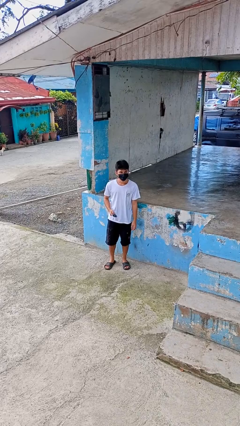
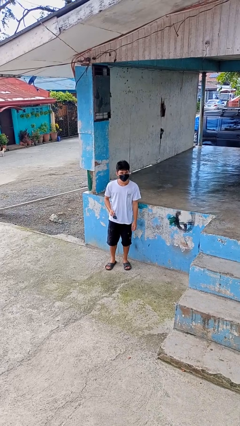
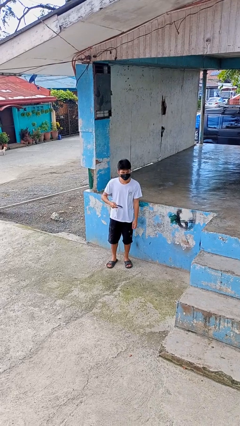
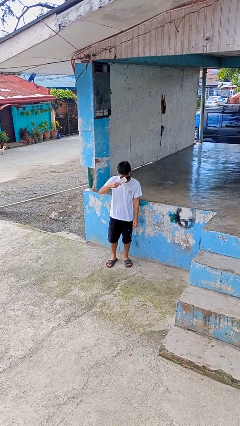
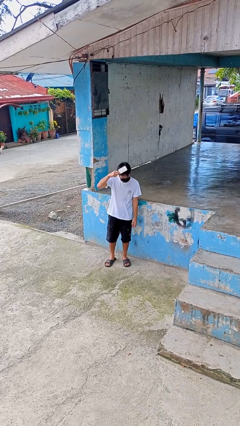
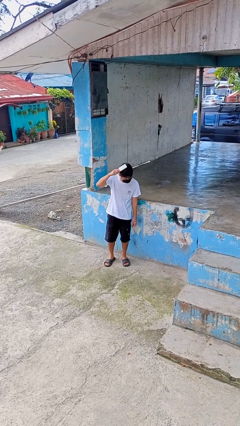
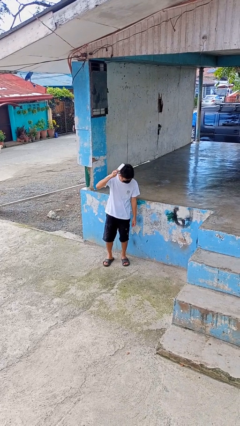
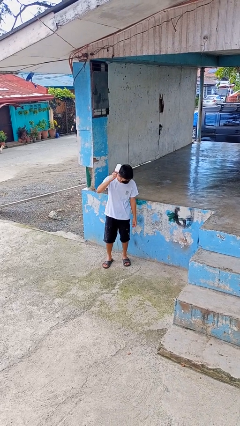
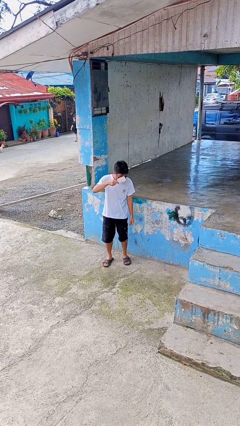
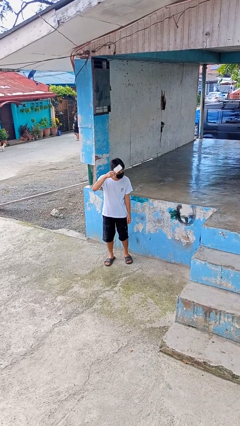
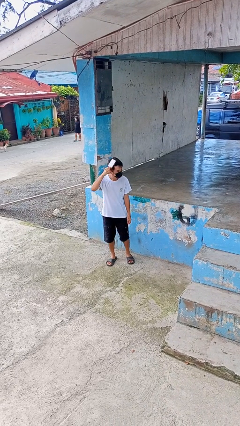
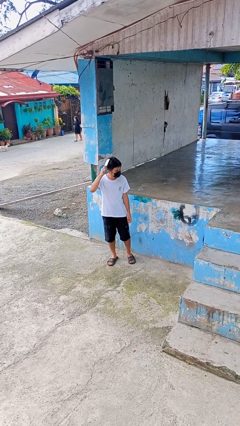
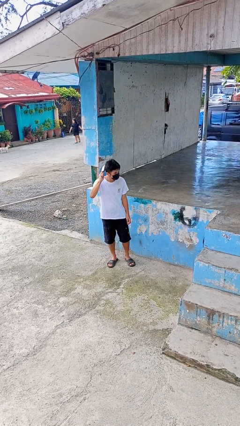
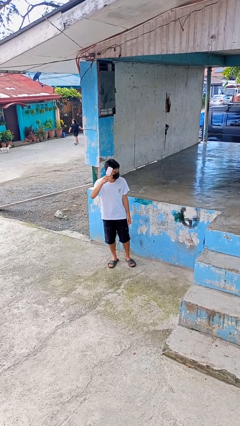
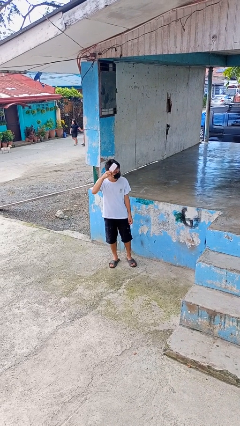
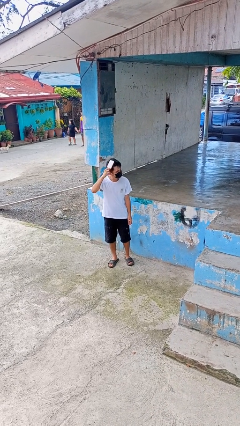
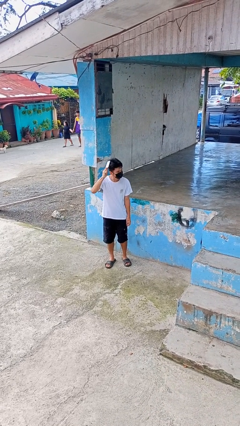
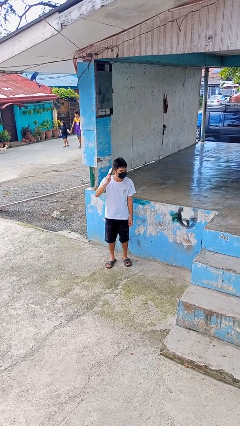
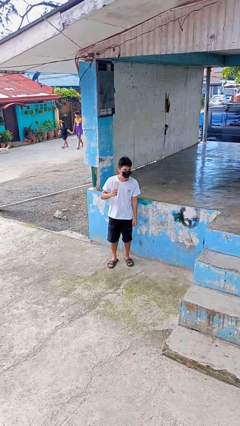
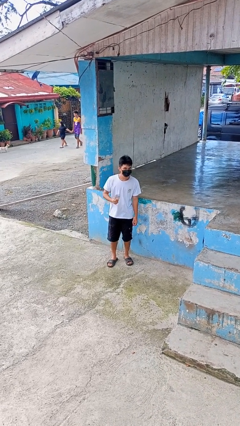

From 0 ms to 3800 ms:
person brushes hair

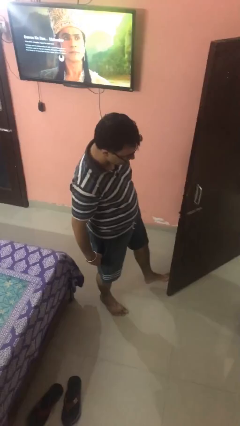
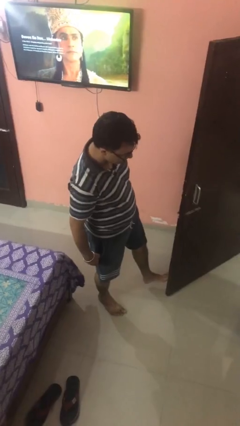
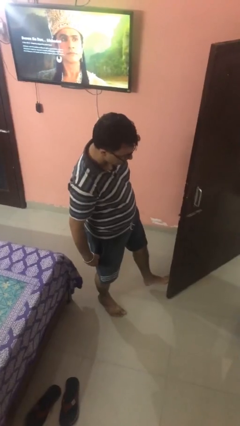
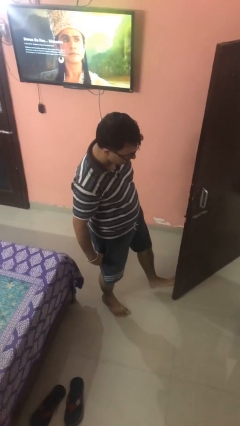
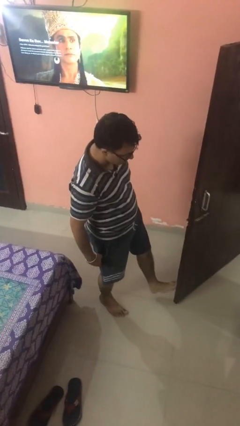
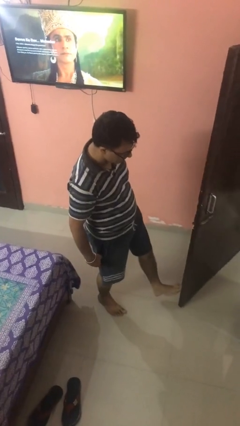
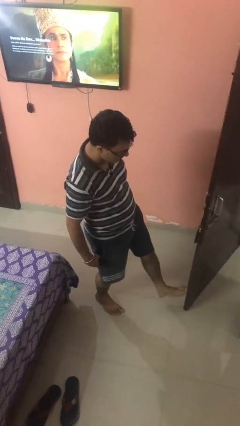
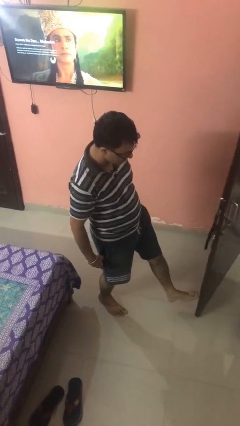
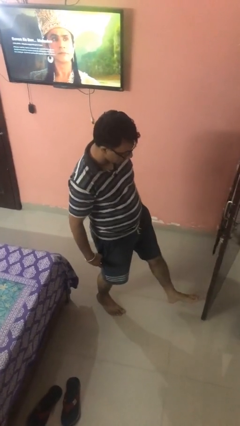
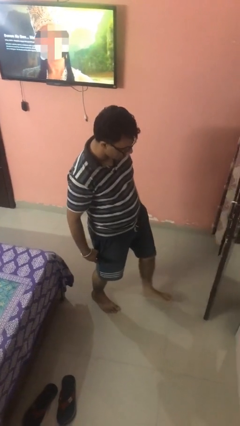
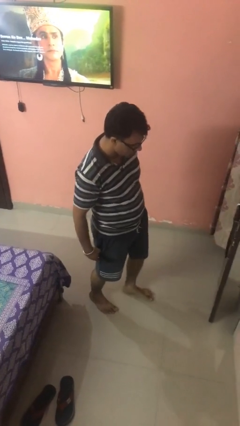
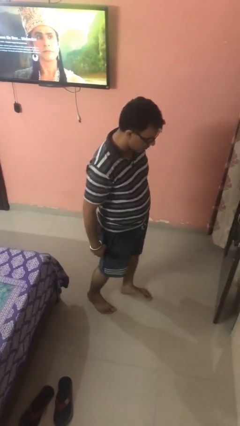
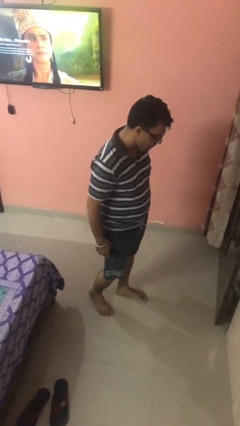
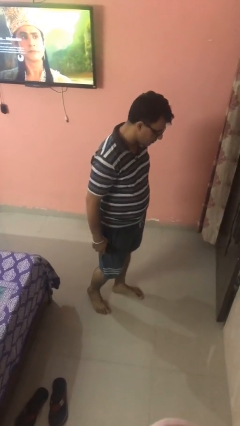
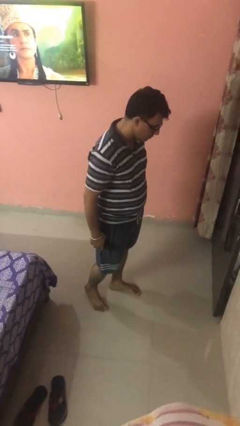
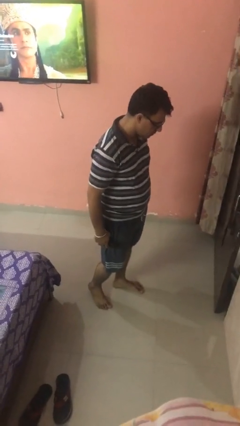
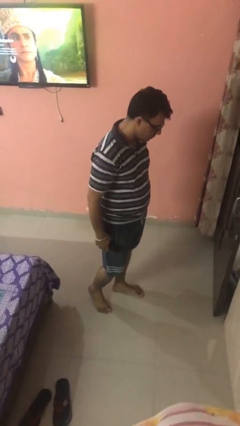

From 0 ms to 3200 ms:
person closes door with foot

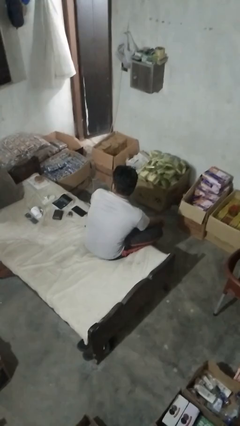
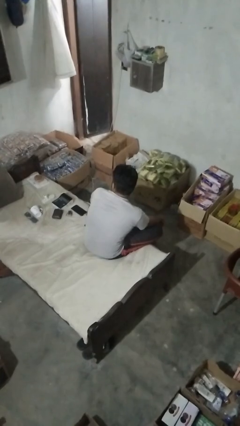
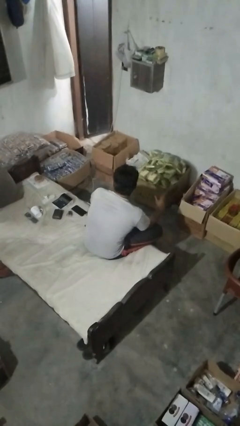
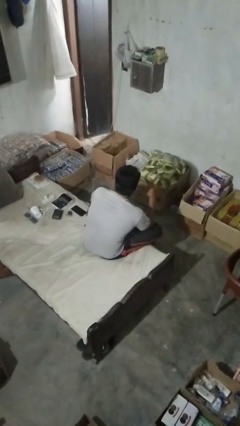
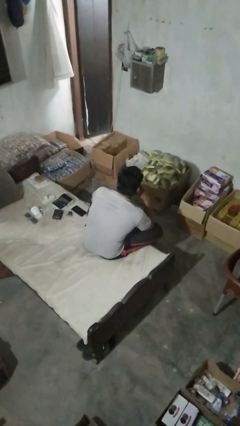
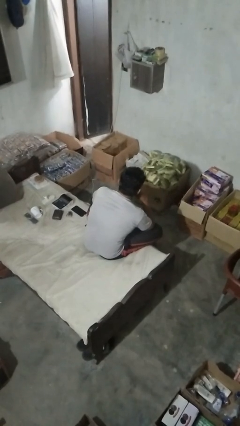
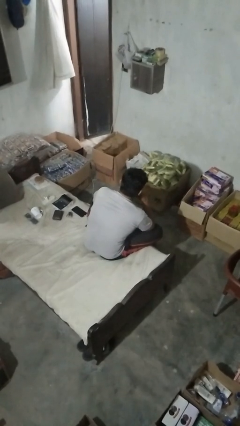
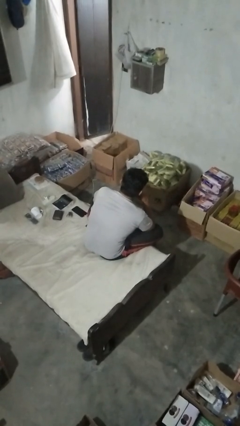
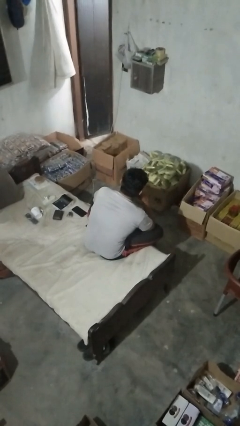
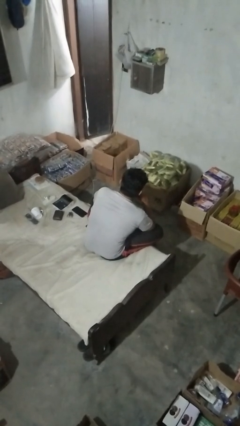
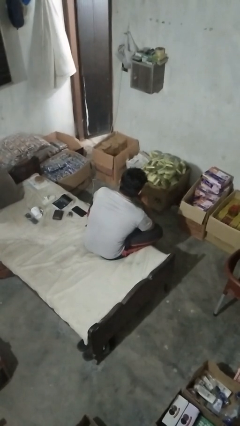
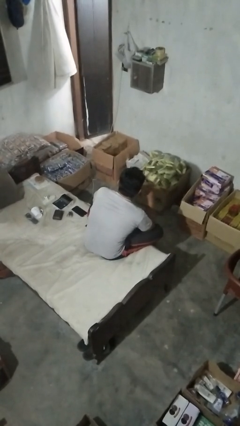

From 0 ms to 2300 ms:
person strokes chin

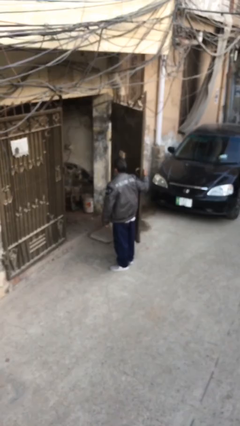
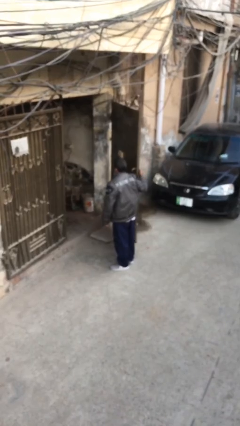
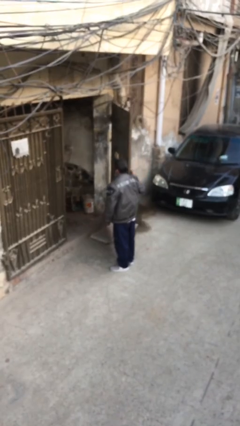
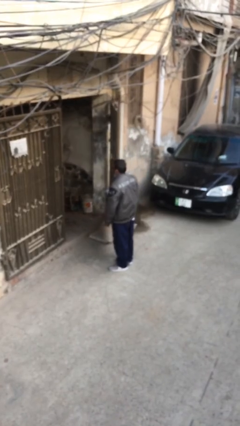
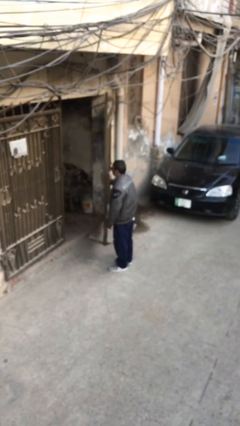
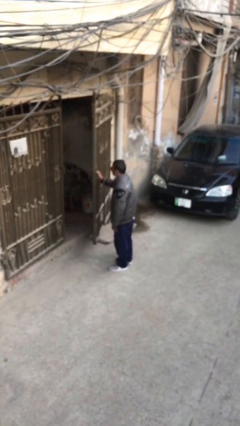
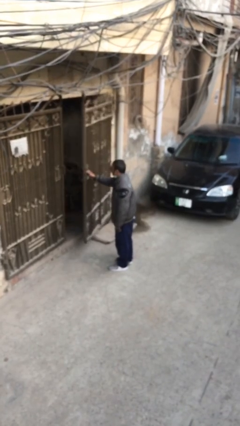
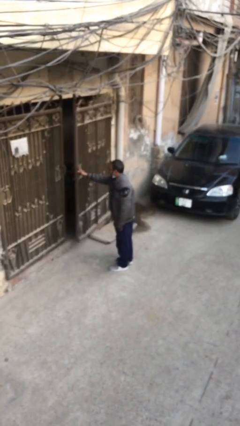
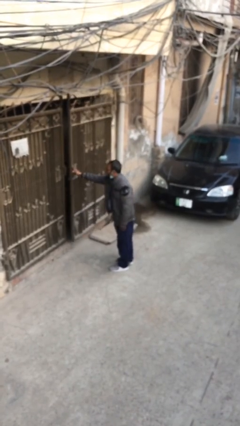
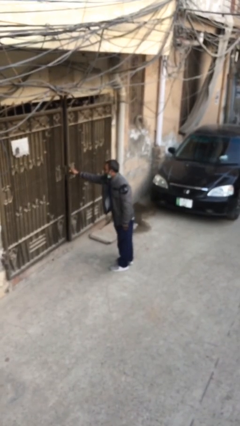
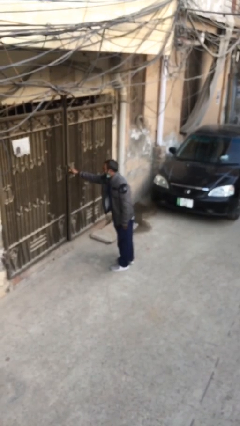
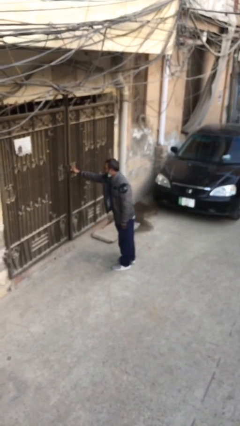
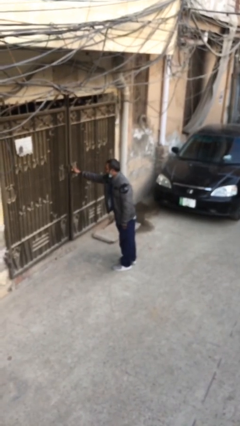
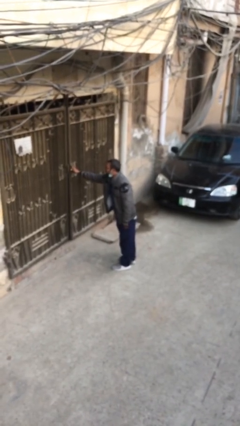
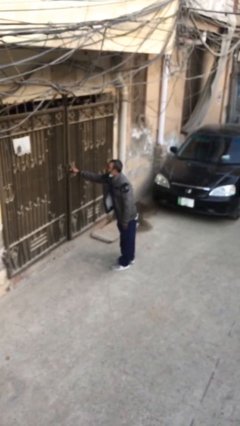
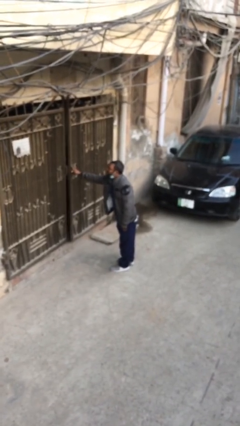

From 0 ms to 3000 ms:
person closes facility door

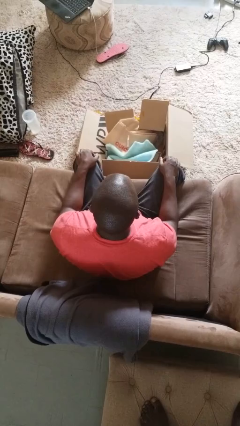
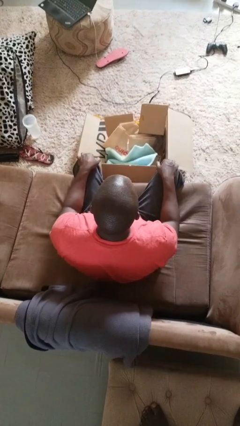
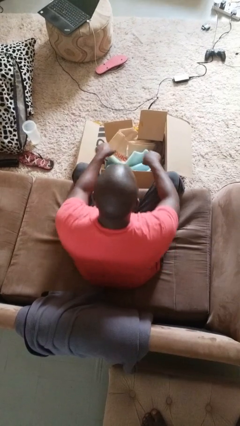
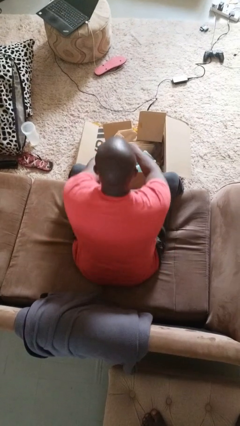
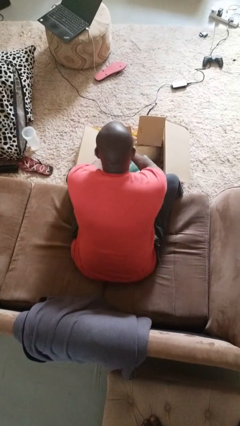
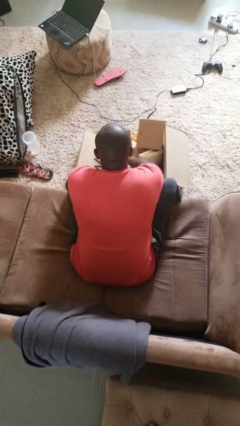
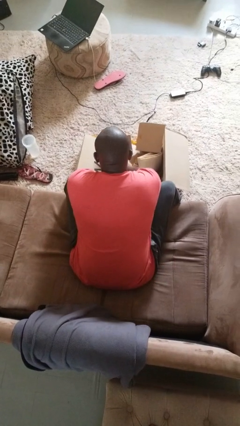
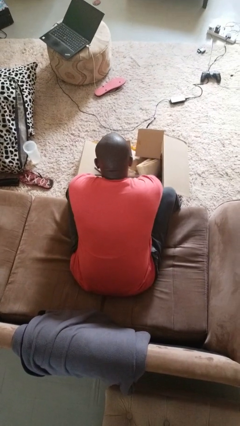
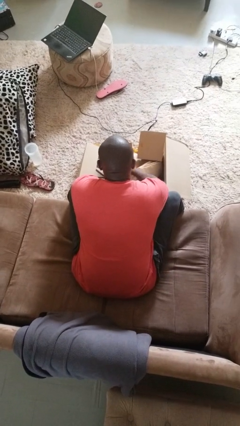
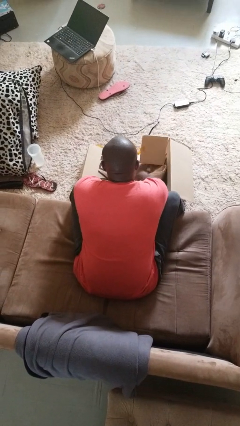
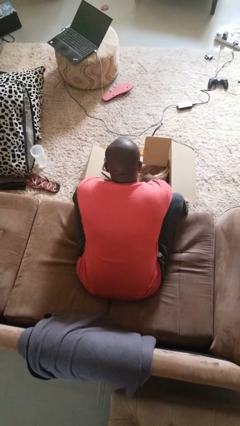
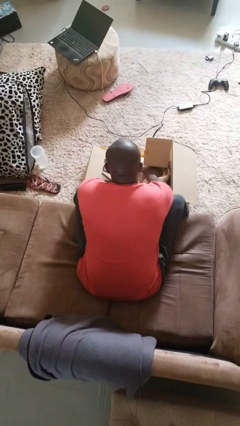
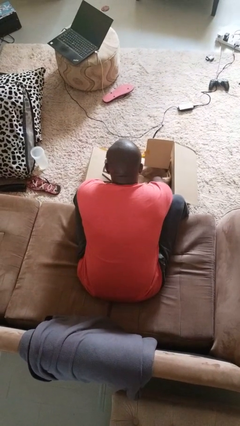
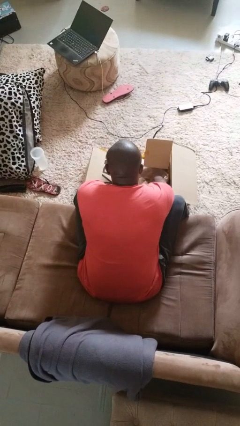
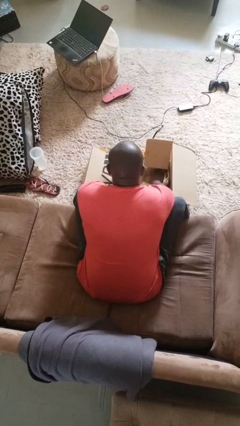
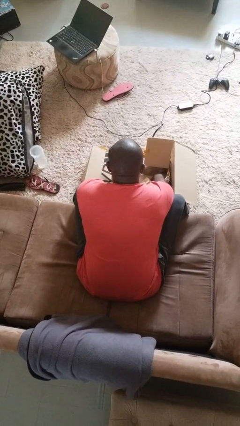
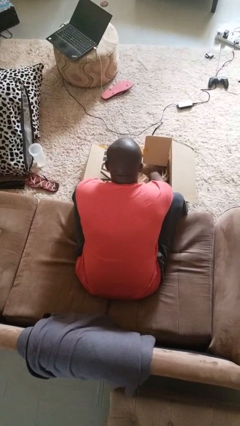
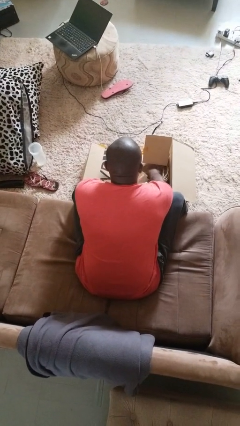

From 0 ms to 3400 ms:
person searches in box

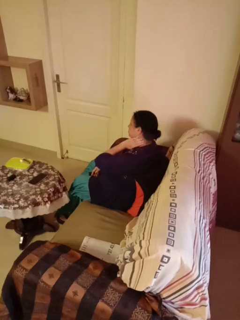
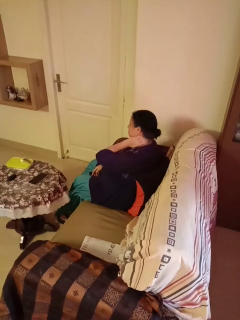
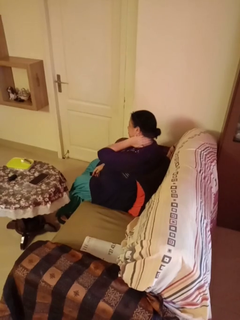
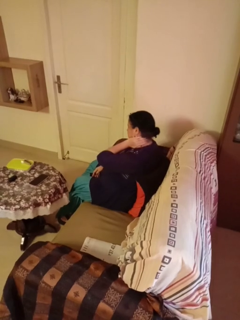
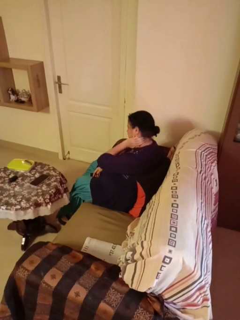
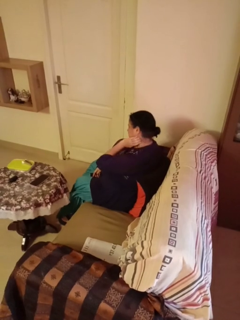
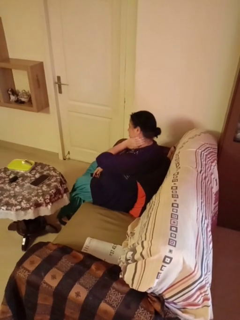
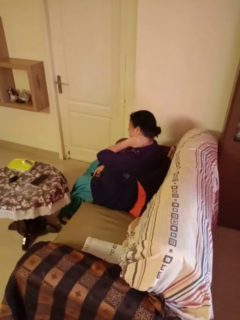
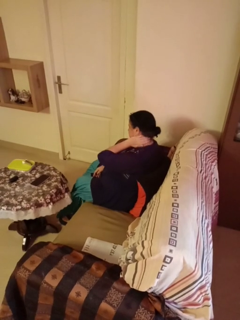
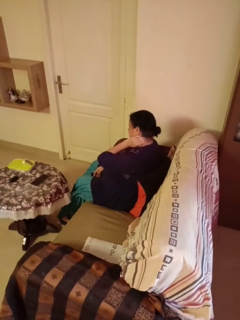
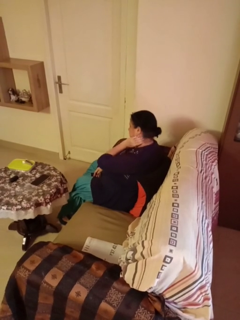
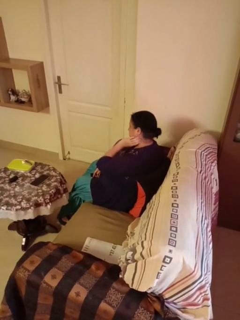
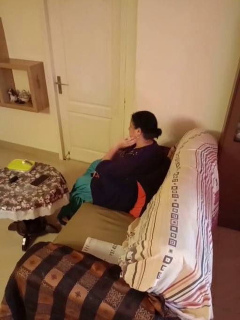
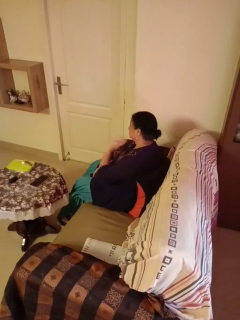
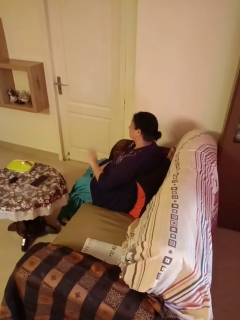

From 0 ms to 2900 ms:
person rubs neck
